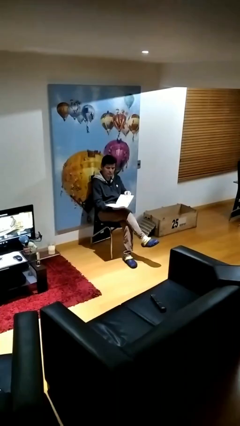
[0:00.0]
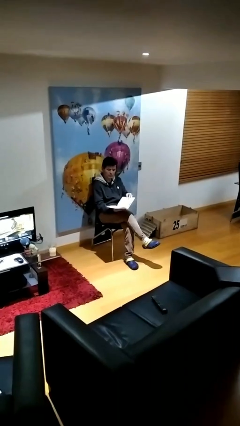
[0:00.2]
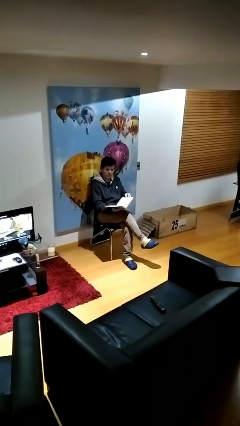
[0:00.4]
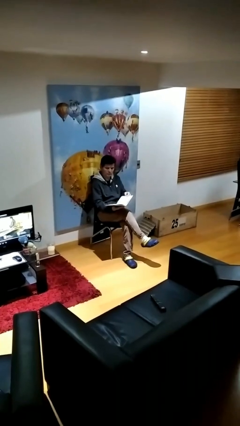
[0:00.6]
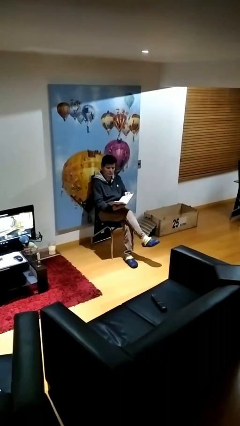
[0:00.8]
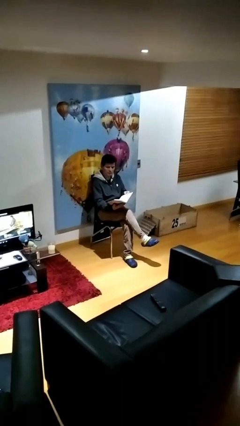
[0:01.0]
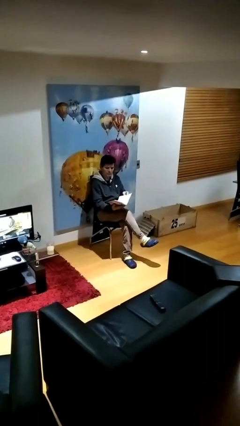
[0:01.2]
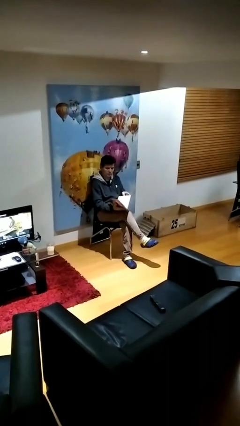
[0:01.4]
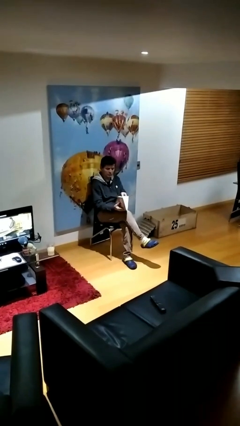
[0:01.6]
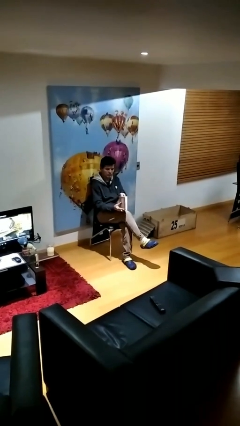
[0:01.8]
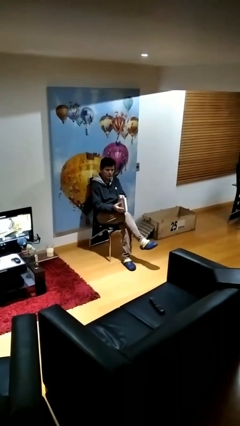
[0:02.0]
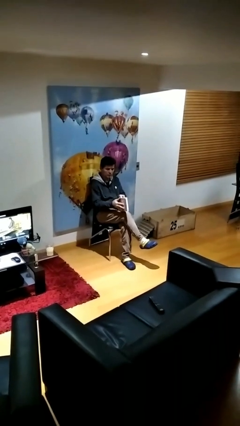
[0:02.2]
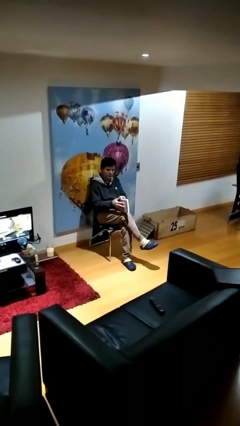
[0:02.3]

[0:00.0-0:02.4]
person reads document

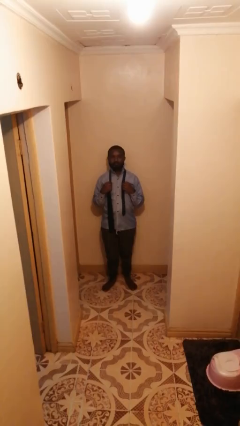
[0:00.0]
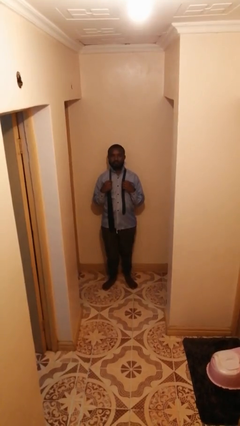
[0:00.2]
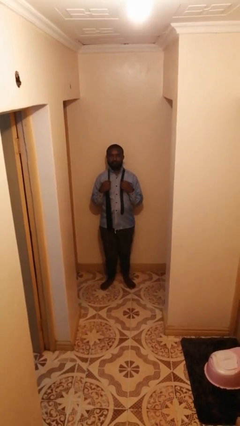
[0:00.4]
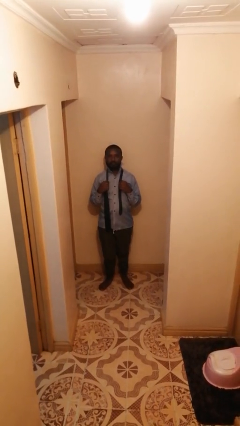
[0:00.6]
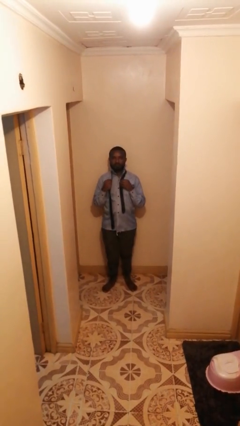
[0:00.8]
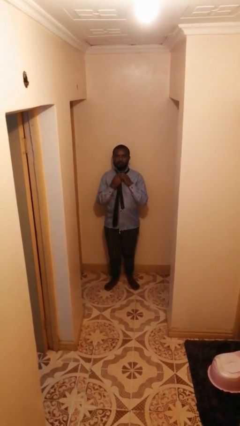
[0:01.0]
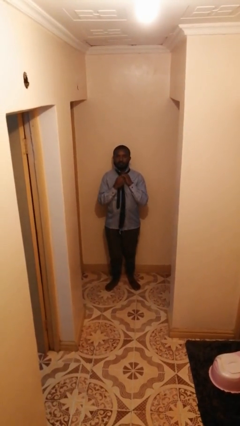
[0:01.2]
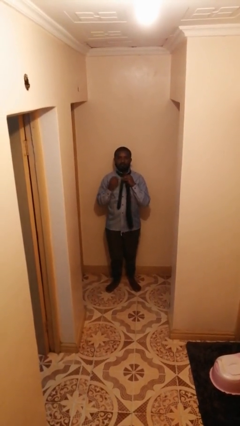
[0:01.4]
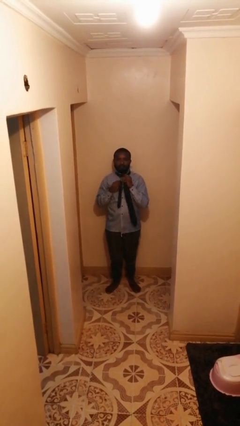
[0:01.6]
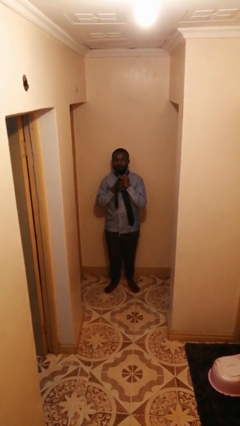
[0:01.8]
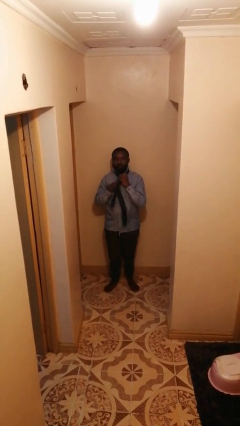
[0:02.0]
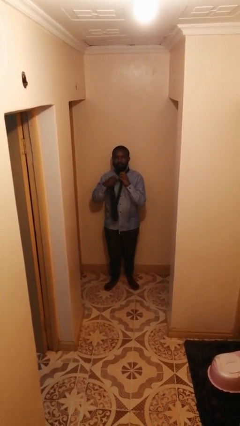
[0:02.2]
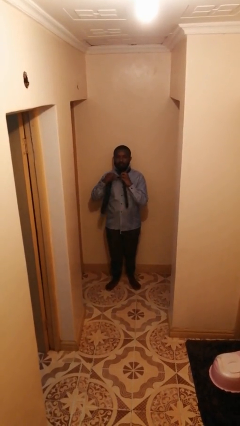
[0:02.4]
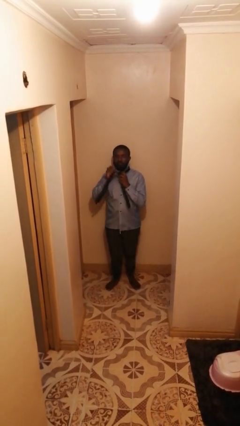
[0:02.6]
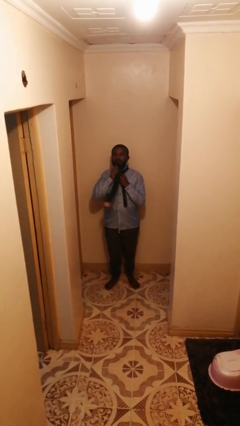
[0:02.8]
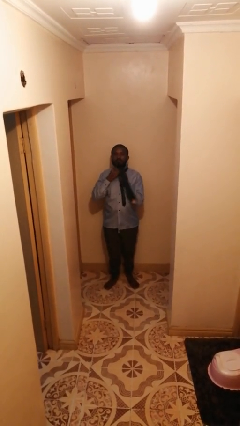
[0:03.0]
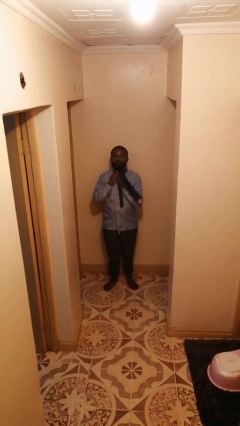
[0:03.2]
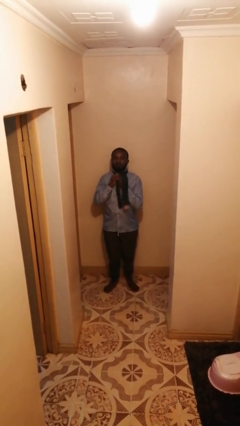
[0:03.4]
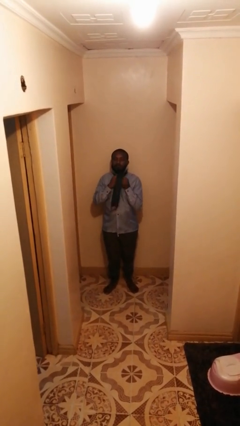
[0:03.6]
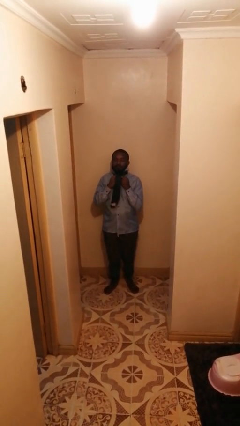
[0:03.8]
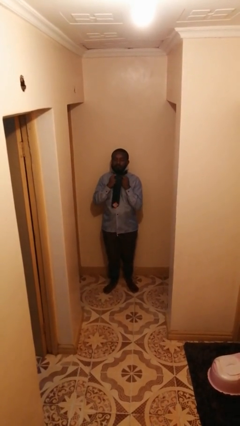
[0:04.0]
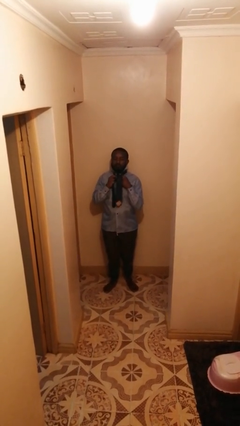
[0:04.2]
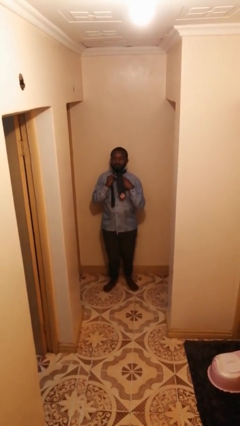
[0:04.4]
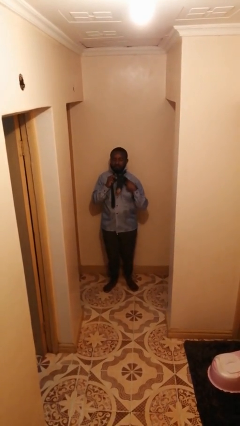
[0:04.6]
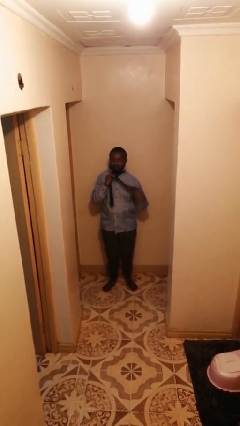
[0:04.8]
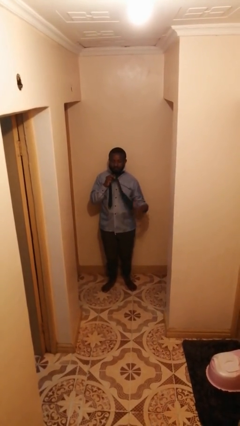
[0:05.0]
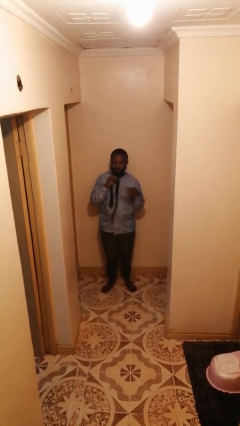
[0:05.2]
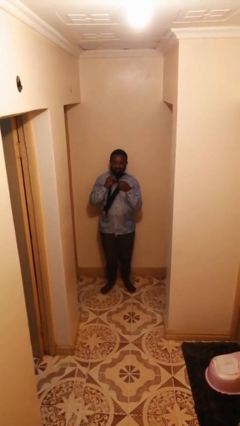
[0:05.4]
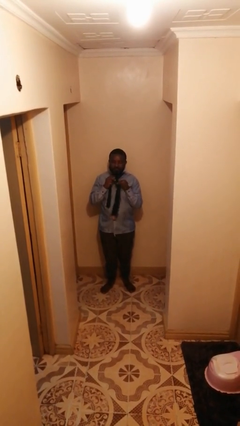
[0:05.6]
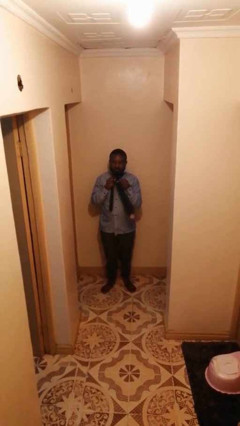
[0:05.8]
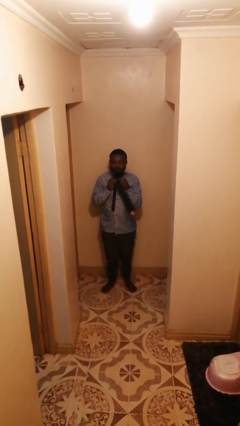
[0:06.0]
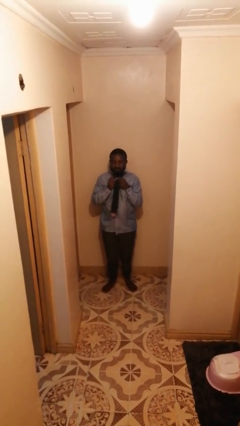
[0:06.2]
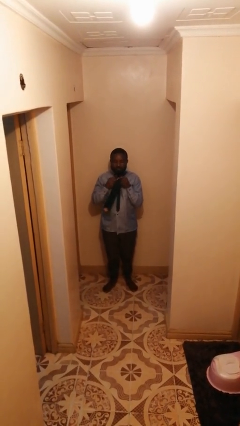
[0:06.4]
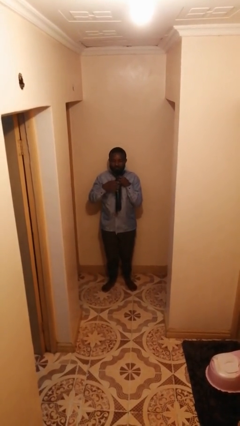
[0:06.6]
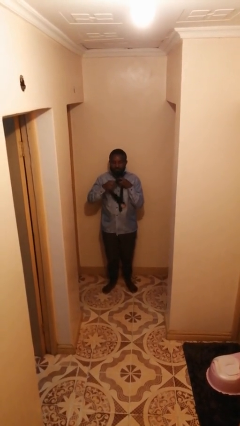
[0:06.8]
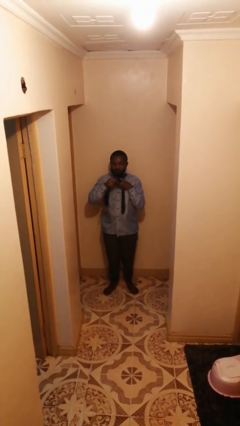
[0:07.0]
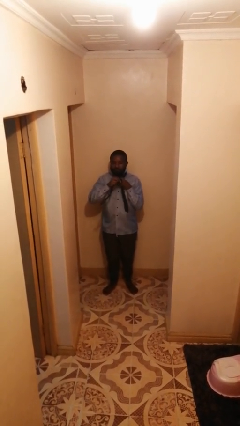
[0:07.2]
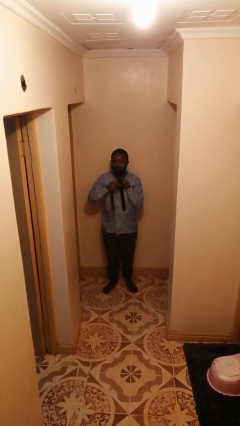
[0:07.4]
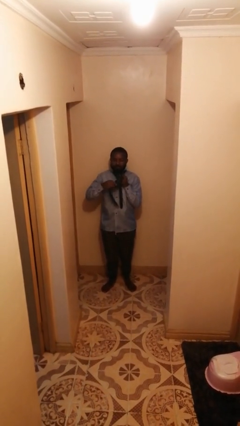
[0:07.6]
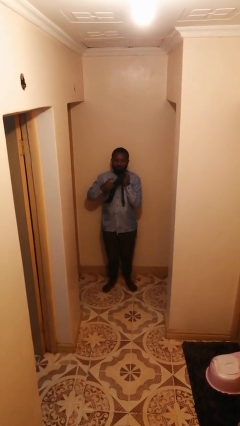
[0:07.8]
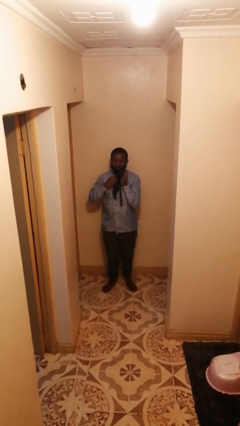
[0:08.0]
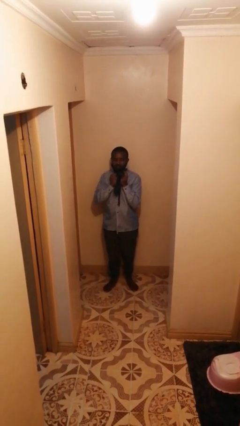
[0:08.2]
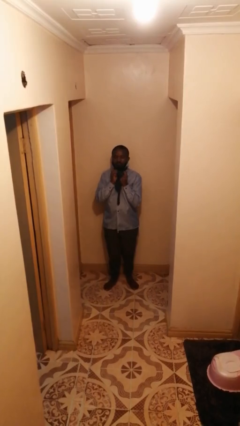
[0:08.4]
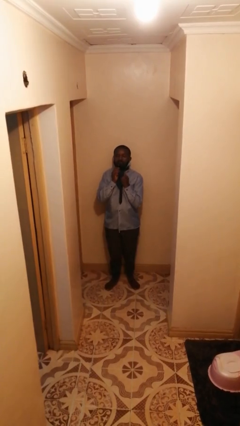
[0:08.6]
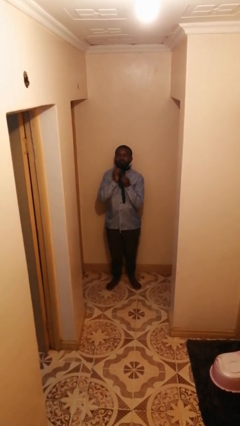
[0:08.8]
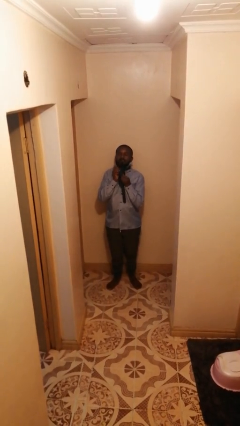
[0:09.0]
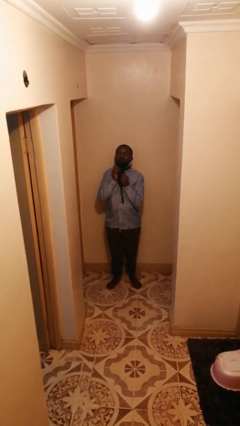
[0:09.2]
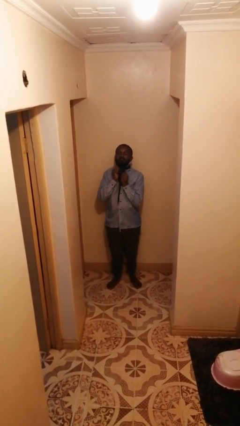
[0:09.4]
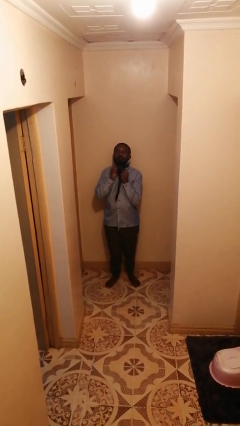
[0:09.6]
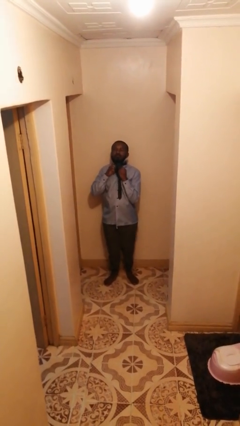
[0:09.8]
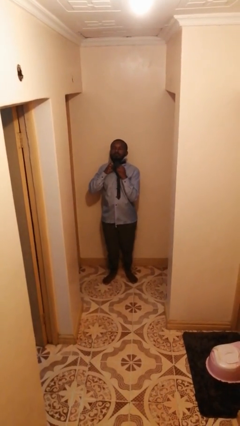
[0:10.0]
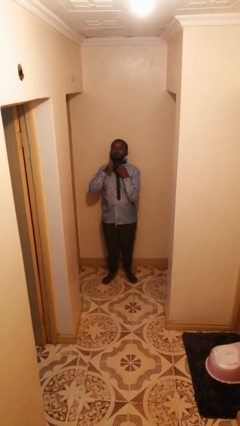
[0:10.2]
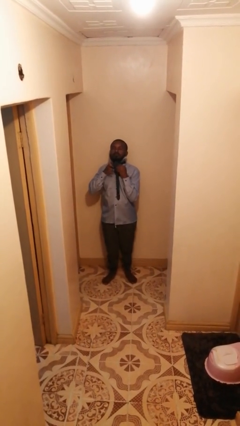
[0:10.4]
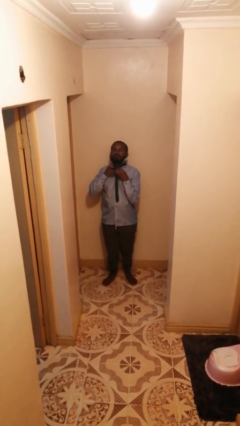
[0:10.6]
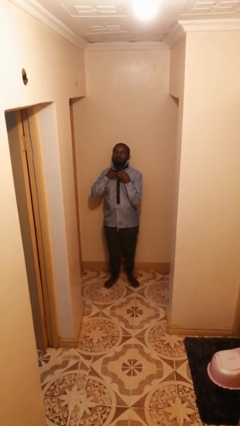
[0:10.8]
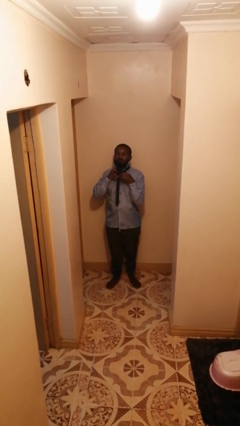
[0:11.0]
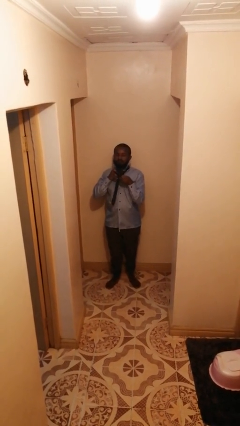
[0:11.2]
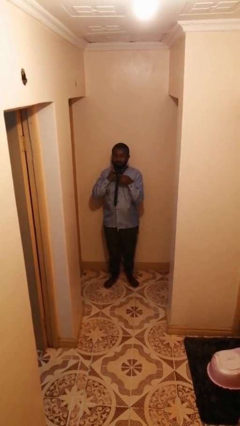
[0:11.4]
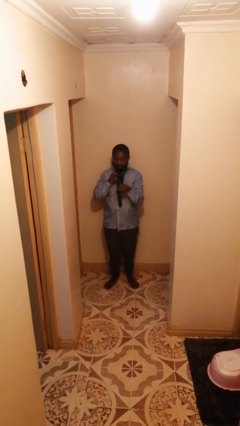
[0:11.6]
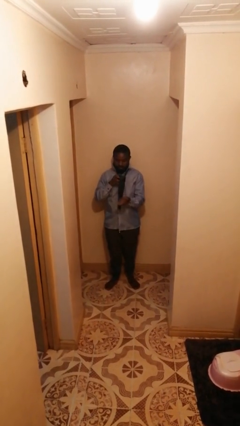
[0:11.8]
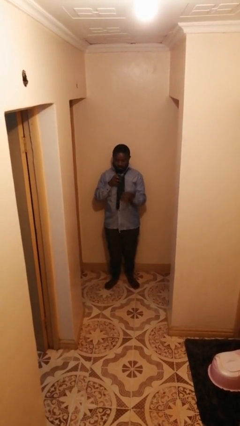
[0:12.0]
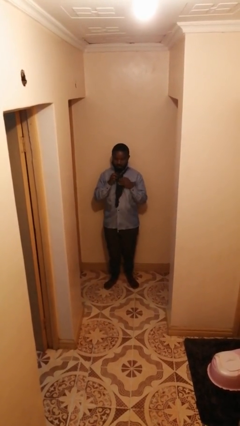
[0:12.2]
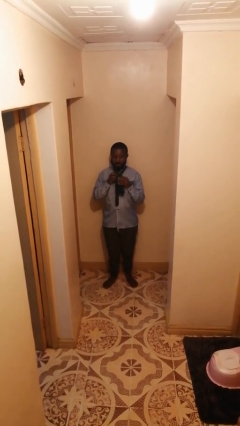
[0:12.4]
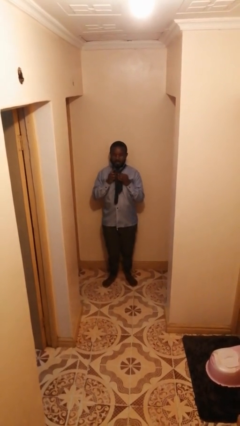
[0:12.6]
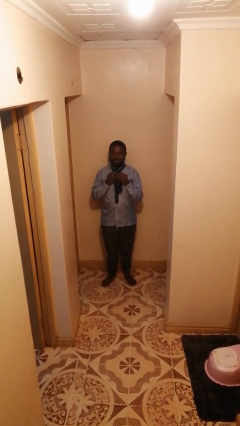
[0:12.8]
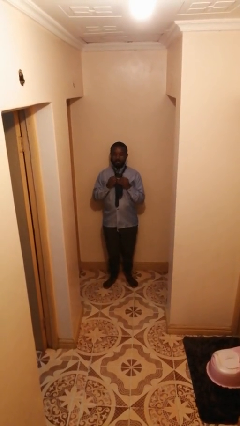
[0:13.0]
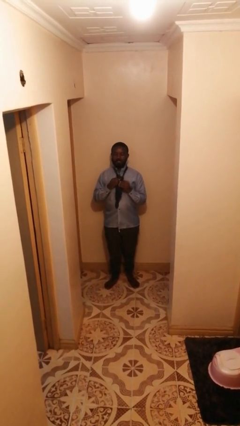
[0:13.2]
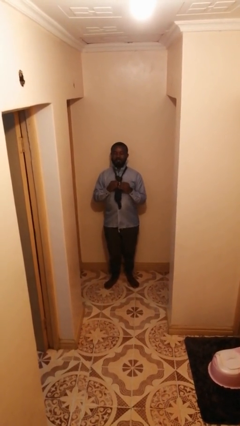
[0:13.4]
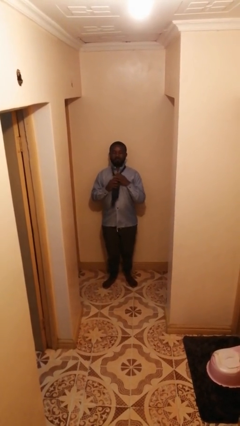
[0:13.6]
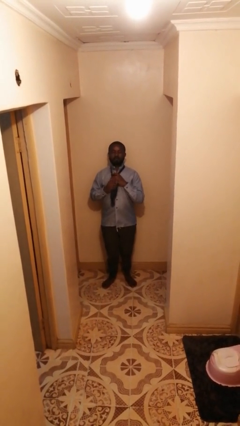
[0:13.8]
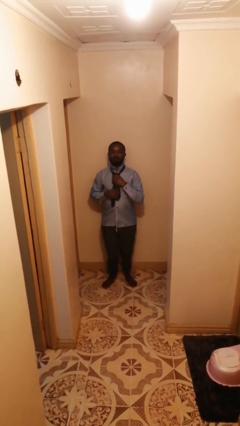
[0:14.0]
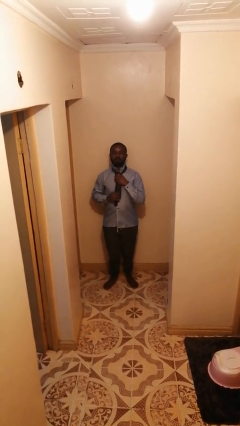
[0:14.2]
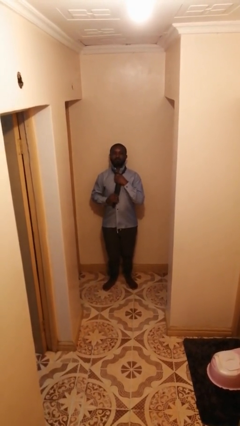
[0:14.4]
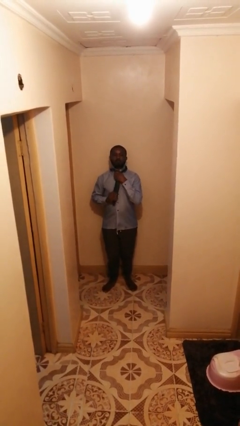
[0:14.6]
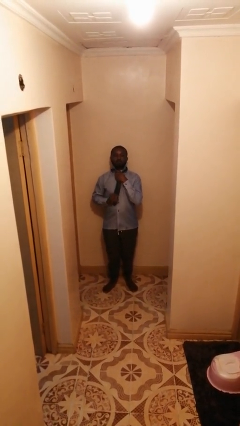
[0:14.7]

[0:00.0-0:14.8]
person puts on necktie

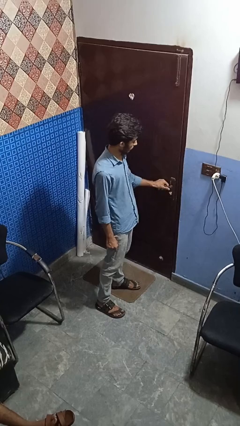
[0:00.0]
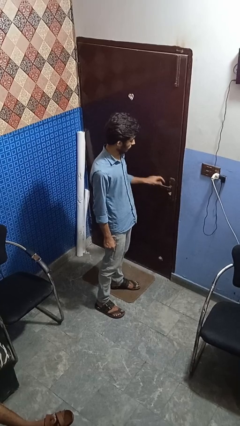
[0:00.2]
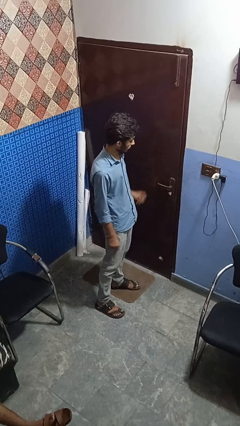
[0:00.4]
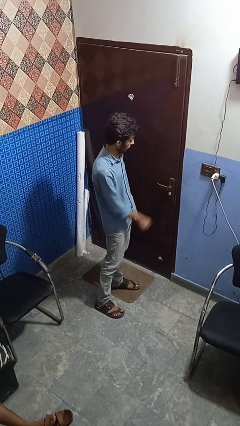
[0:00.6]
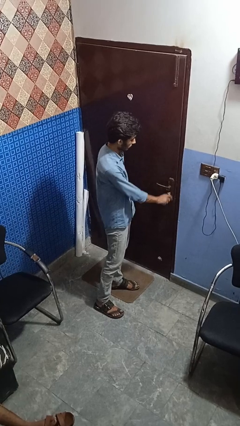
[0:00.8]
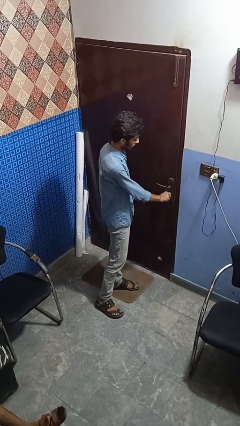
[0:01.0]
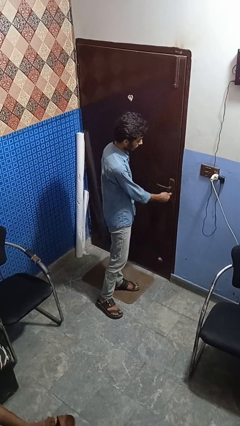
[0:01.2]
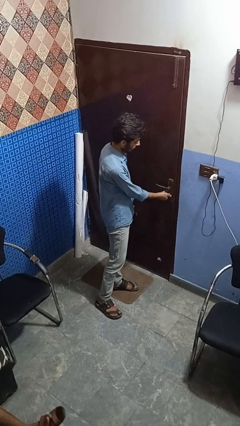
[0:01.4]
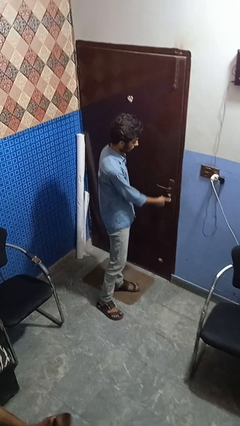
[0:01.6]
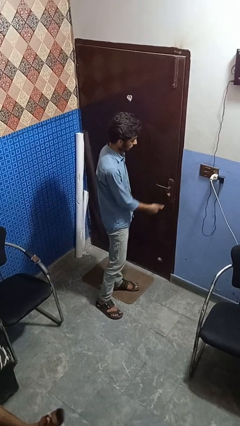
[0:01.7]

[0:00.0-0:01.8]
person locks door with keys
